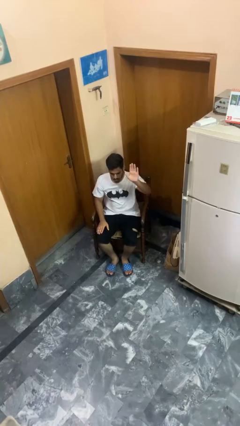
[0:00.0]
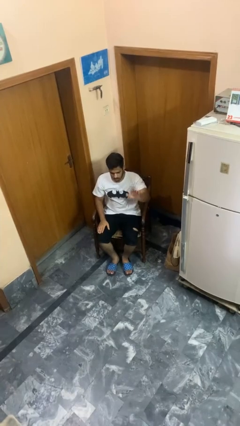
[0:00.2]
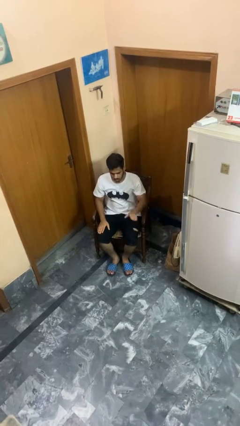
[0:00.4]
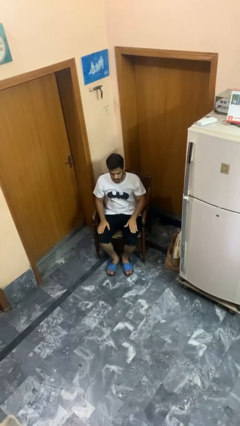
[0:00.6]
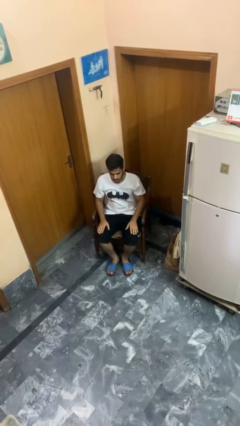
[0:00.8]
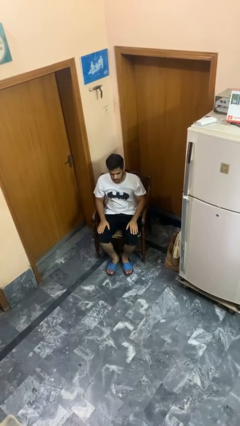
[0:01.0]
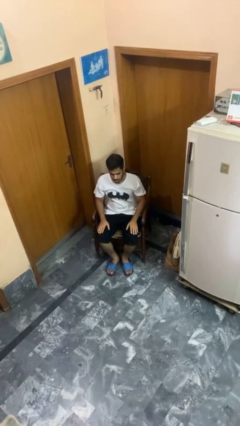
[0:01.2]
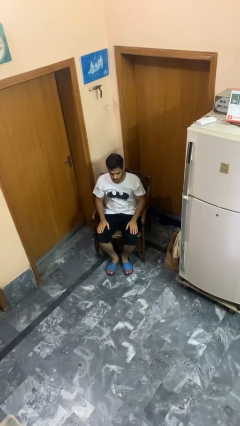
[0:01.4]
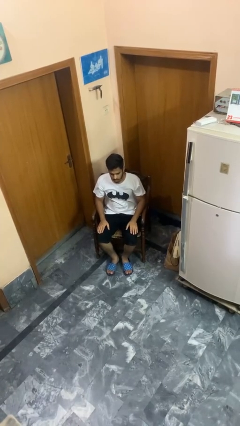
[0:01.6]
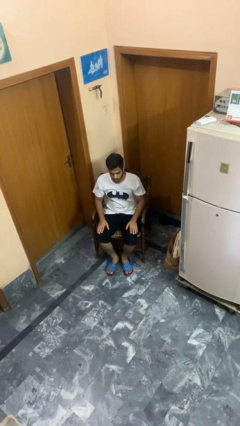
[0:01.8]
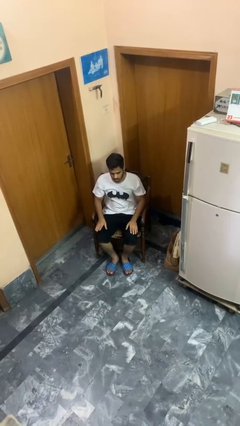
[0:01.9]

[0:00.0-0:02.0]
person gestures lower hand

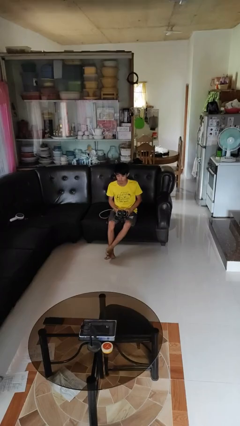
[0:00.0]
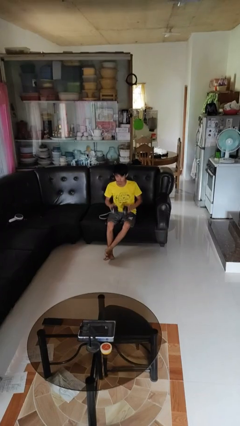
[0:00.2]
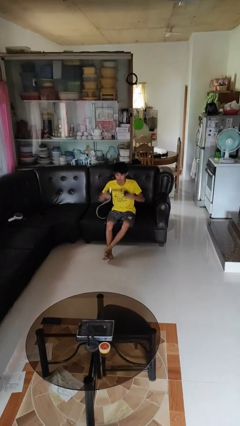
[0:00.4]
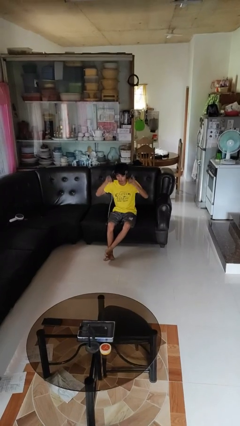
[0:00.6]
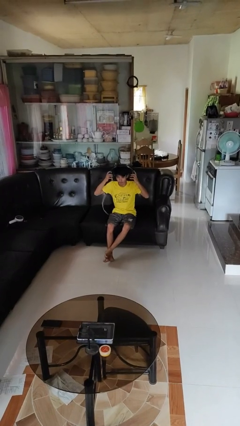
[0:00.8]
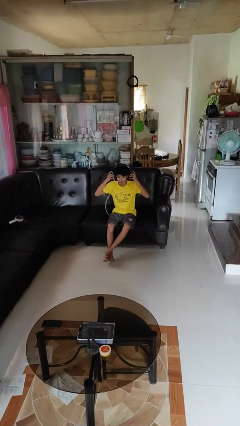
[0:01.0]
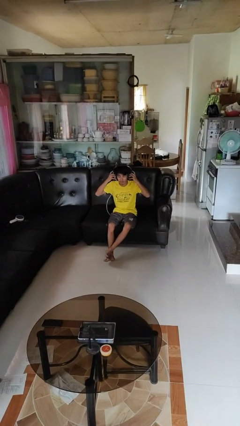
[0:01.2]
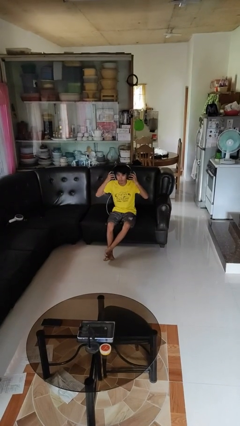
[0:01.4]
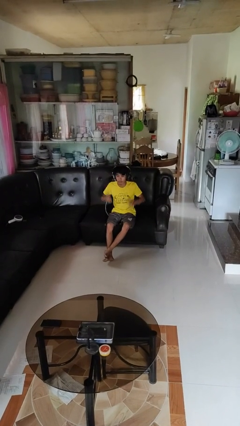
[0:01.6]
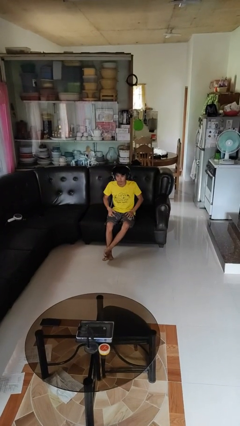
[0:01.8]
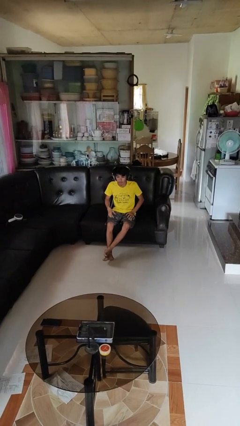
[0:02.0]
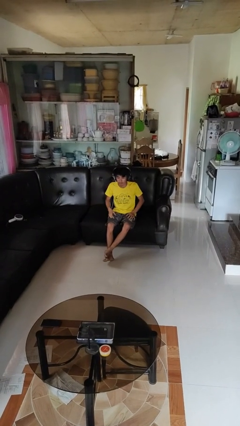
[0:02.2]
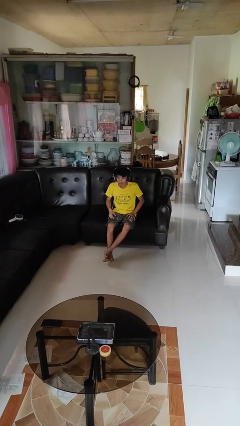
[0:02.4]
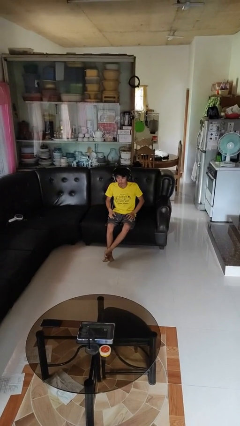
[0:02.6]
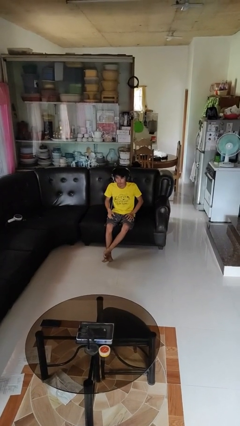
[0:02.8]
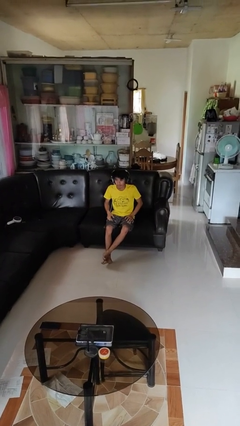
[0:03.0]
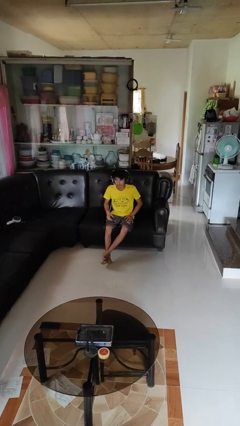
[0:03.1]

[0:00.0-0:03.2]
person puts on headphones

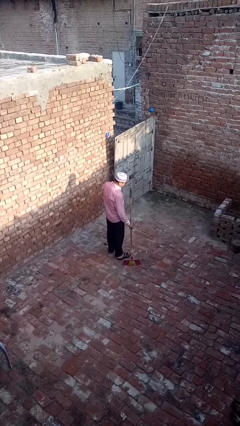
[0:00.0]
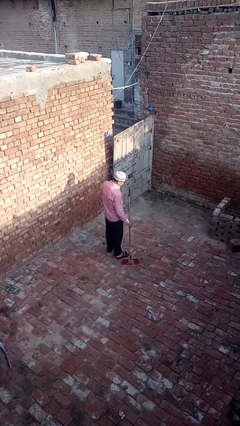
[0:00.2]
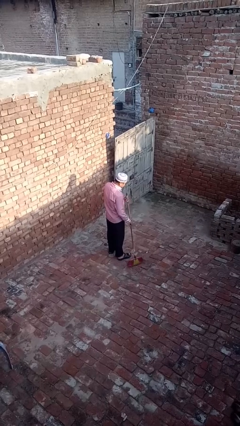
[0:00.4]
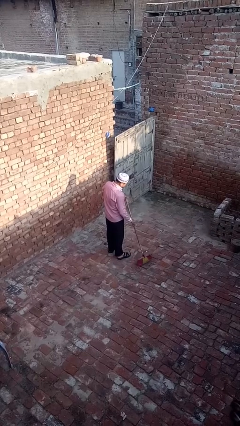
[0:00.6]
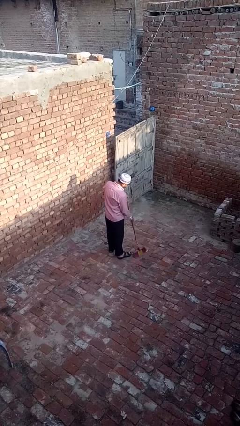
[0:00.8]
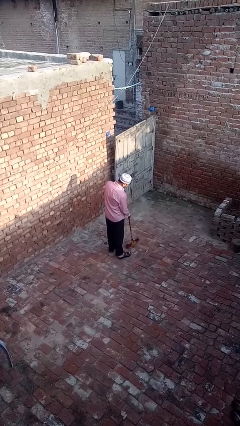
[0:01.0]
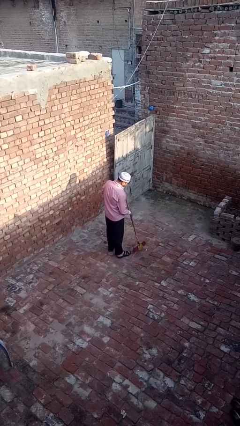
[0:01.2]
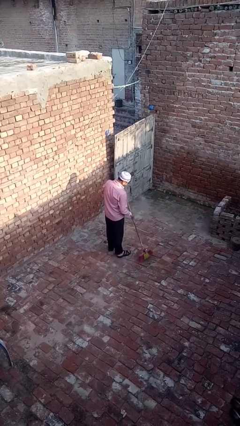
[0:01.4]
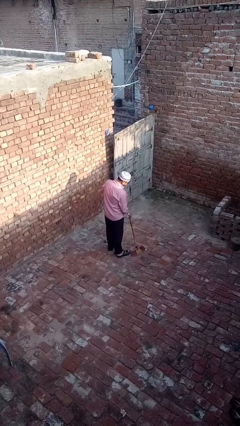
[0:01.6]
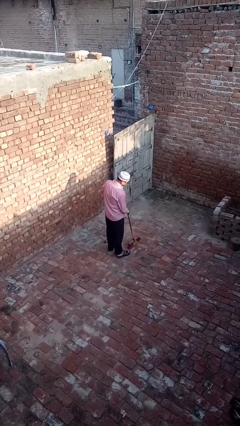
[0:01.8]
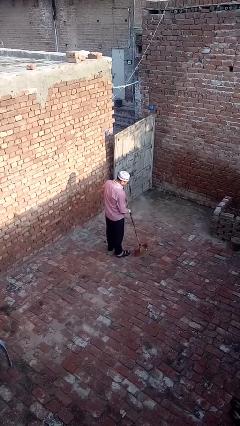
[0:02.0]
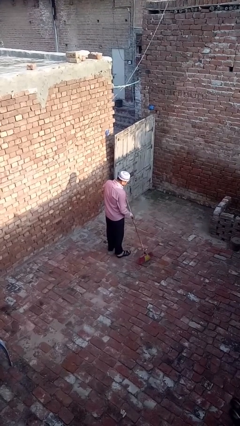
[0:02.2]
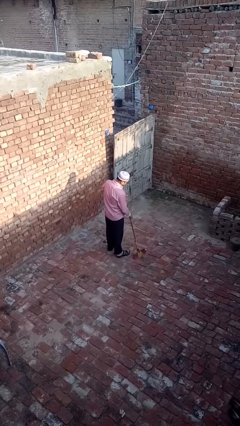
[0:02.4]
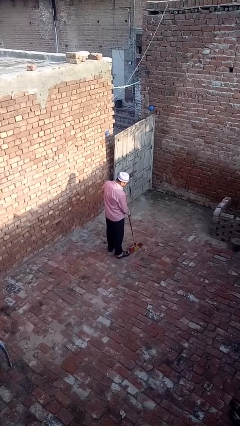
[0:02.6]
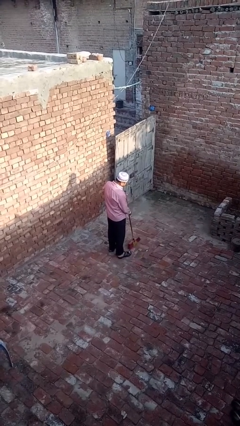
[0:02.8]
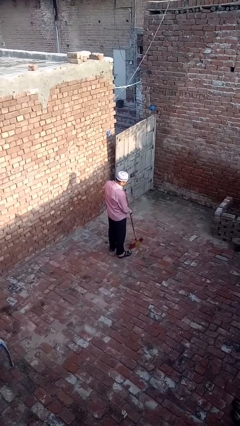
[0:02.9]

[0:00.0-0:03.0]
person sweeps floor

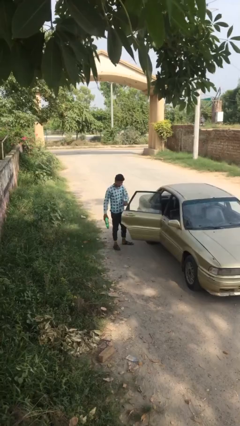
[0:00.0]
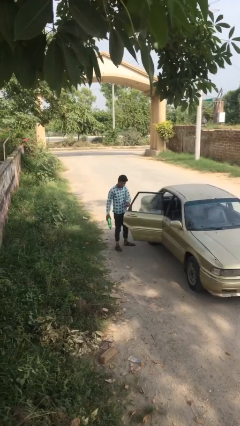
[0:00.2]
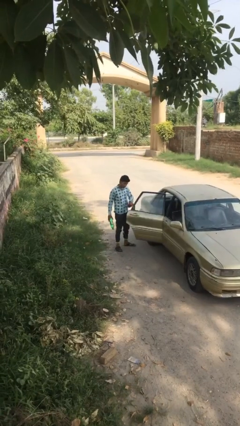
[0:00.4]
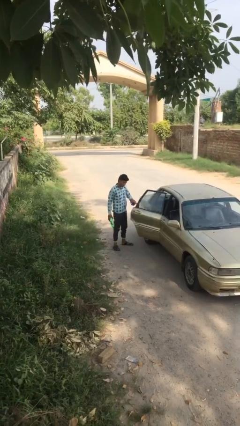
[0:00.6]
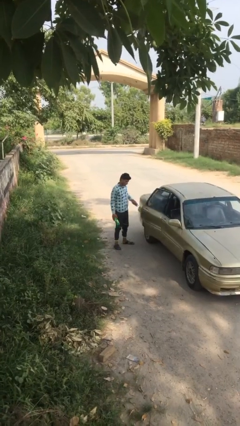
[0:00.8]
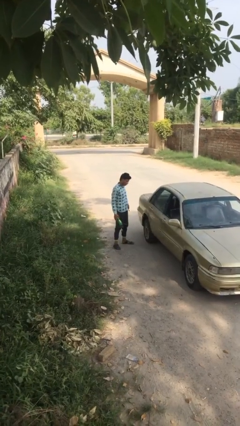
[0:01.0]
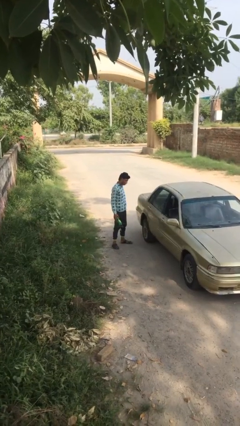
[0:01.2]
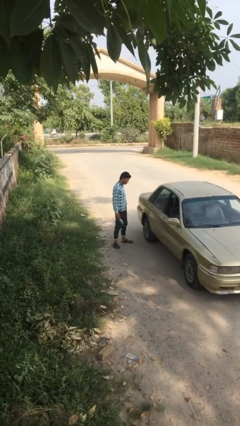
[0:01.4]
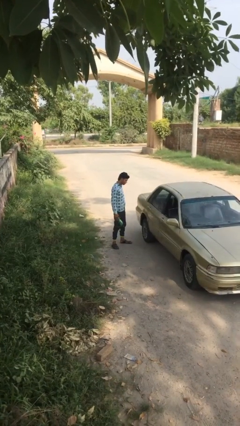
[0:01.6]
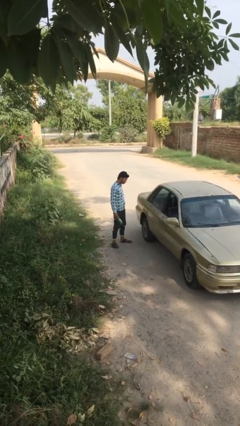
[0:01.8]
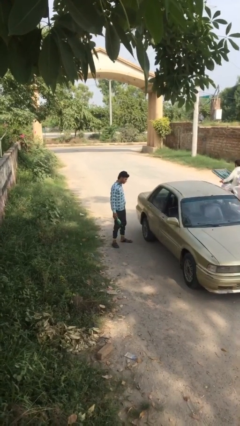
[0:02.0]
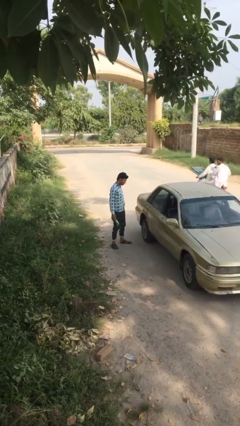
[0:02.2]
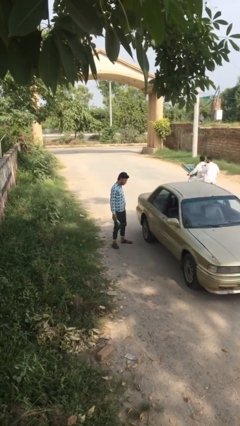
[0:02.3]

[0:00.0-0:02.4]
person closes car door

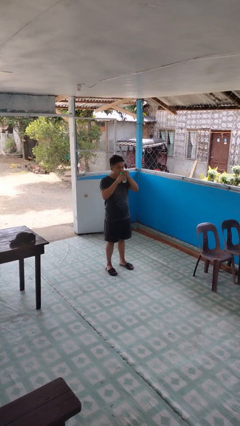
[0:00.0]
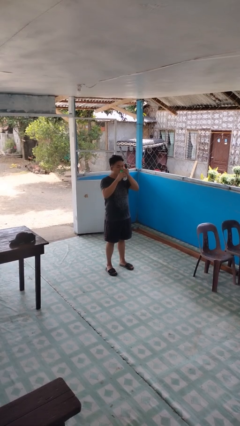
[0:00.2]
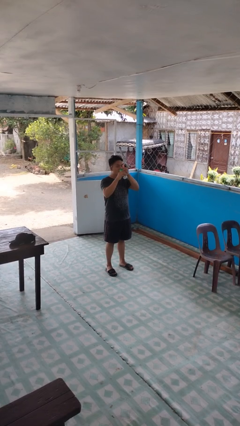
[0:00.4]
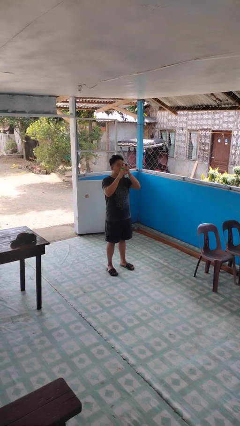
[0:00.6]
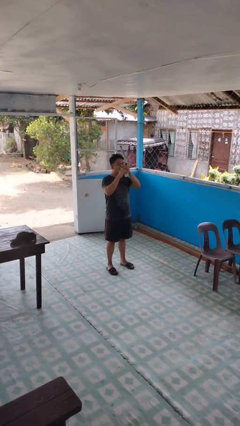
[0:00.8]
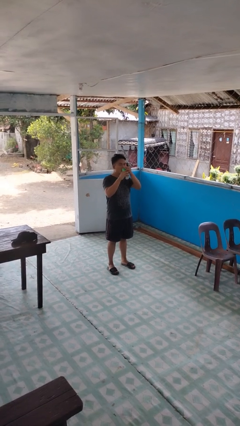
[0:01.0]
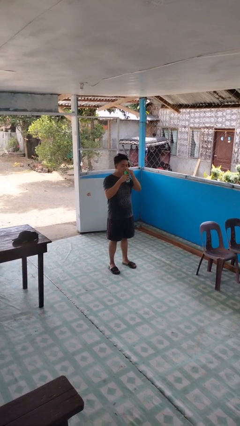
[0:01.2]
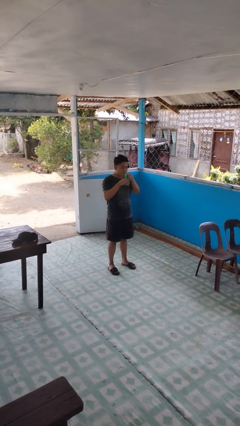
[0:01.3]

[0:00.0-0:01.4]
person drinks from beverage can

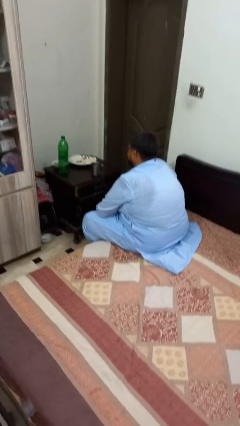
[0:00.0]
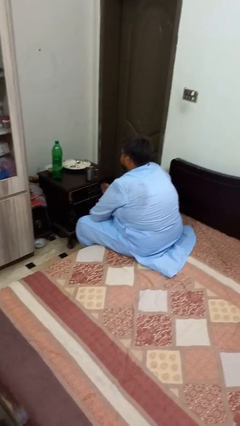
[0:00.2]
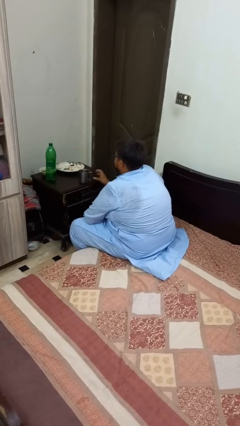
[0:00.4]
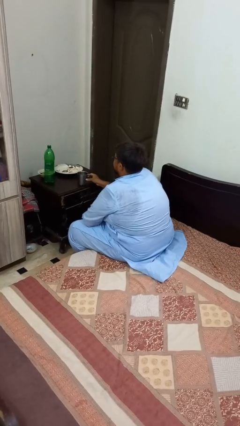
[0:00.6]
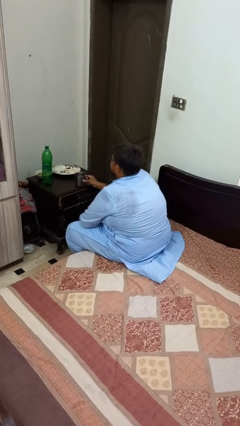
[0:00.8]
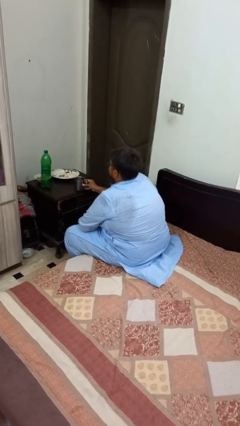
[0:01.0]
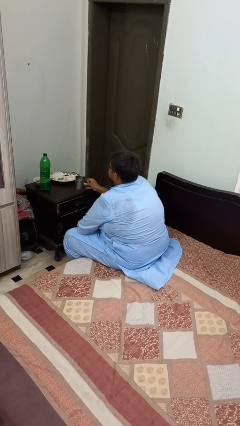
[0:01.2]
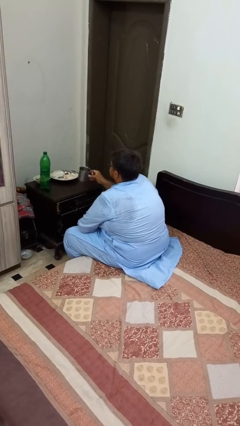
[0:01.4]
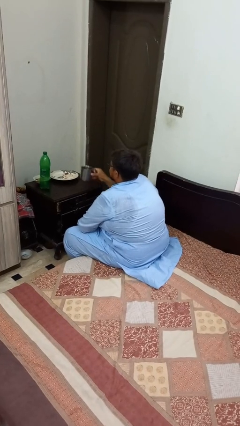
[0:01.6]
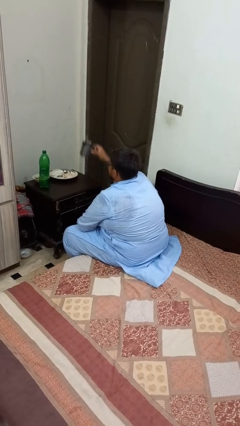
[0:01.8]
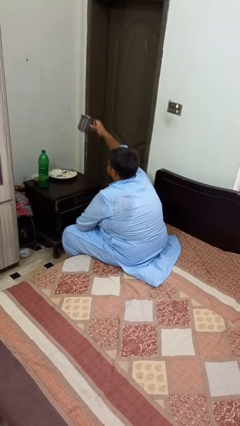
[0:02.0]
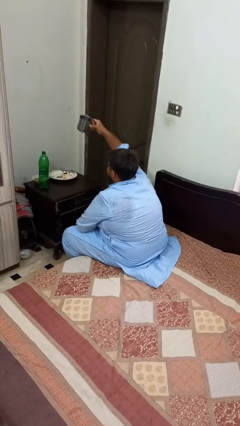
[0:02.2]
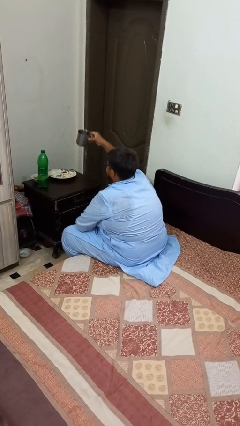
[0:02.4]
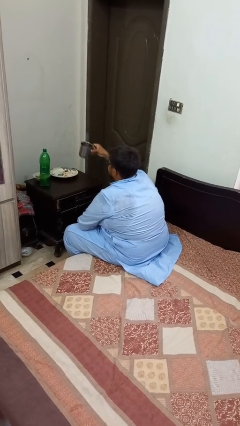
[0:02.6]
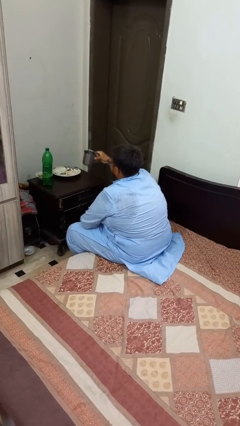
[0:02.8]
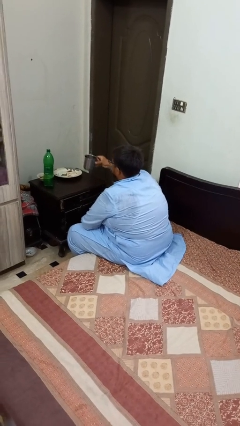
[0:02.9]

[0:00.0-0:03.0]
person picks up object from table

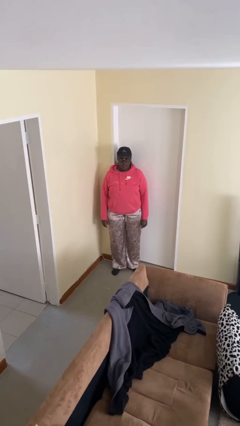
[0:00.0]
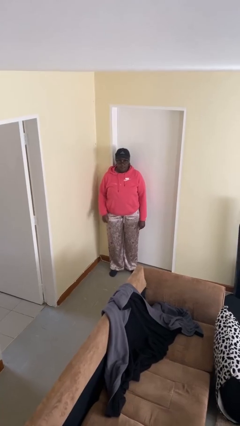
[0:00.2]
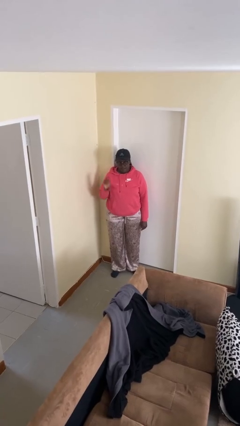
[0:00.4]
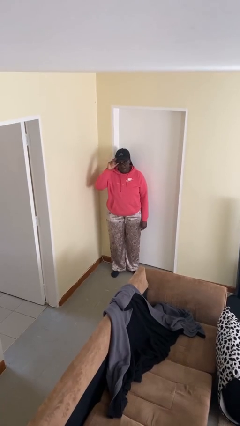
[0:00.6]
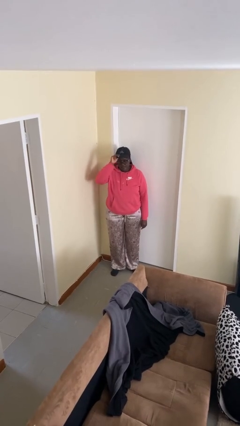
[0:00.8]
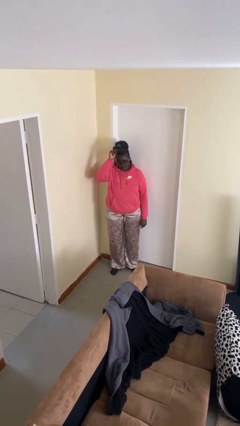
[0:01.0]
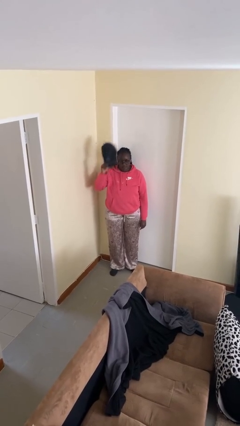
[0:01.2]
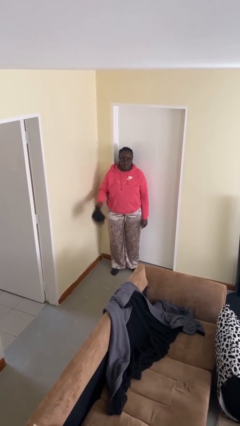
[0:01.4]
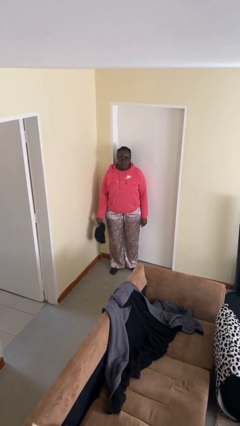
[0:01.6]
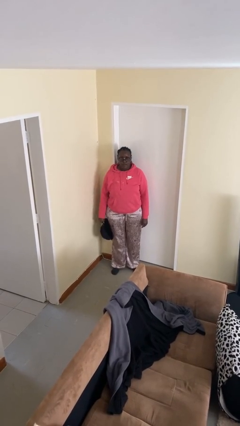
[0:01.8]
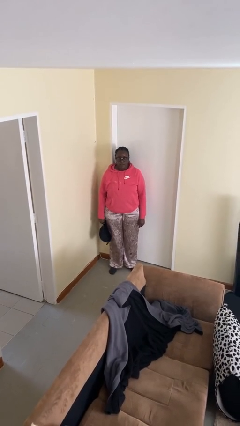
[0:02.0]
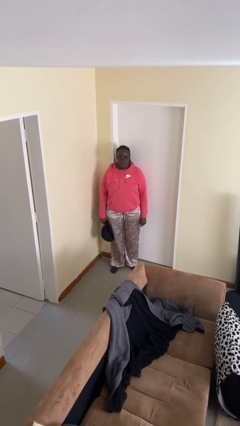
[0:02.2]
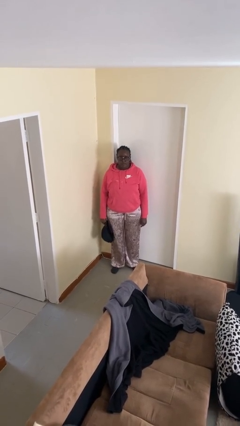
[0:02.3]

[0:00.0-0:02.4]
person takes off hat
